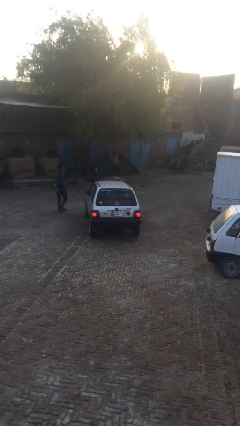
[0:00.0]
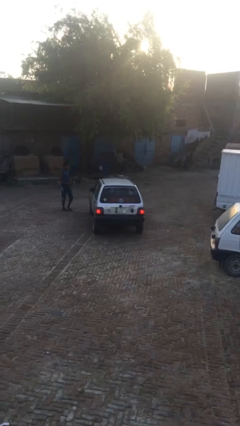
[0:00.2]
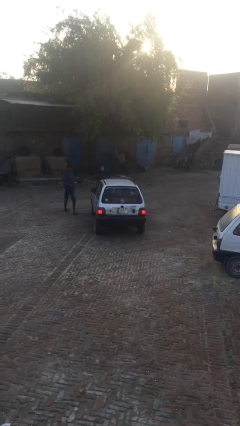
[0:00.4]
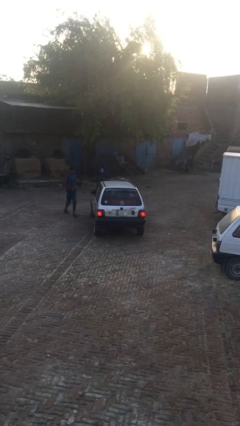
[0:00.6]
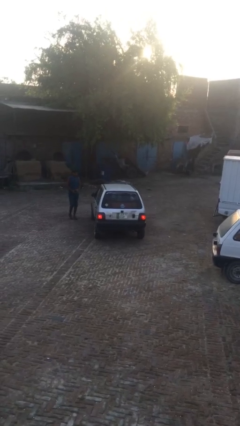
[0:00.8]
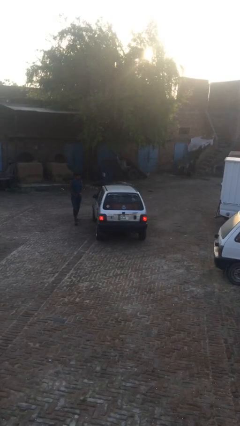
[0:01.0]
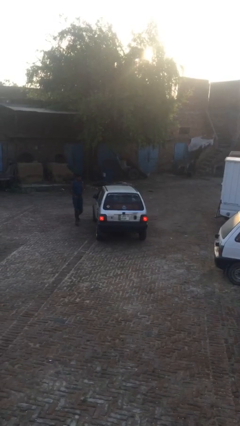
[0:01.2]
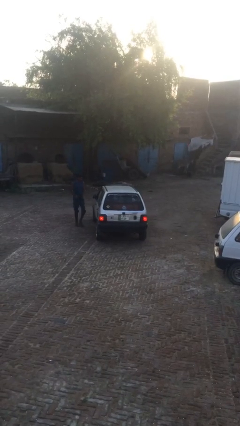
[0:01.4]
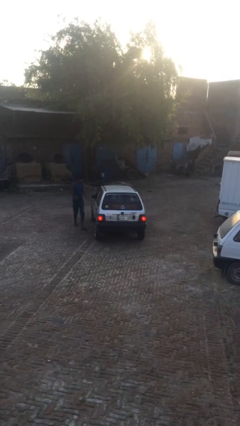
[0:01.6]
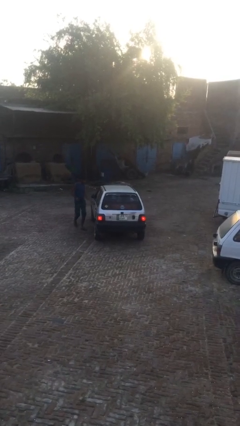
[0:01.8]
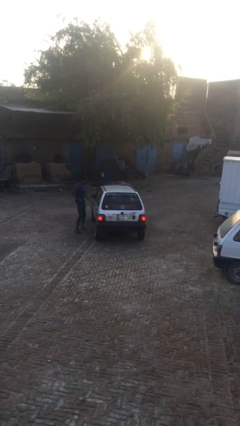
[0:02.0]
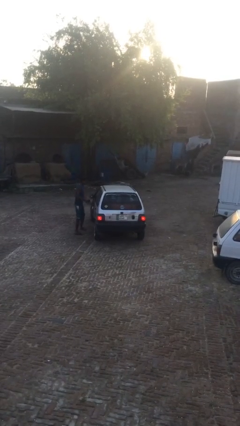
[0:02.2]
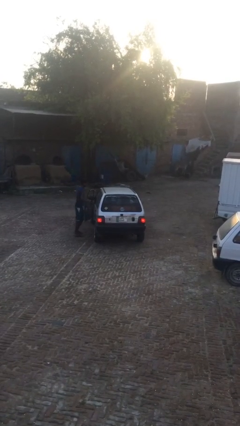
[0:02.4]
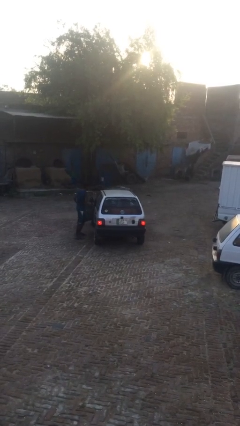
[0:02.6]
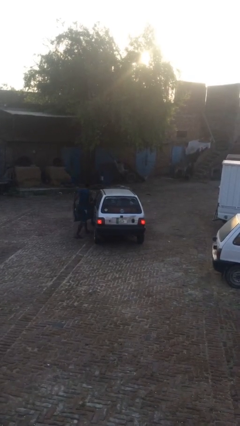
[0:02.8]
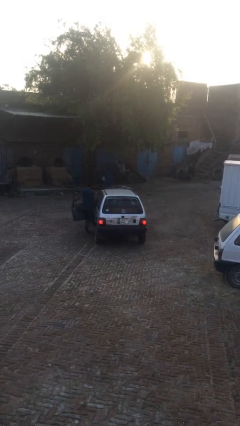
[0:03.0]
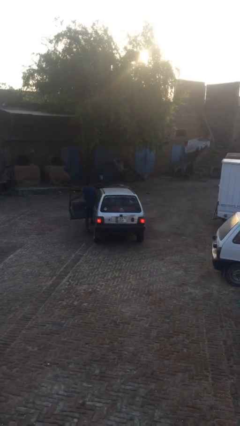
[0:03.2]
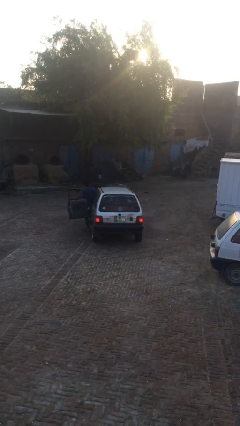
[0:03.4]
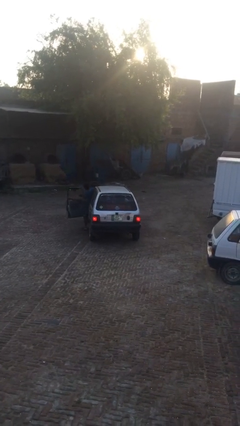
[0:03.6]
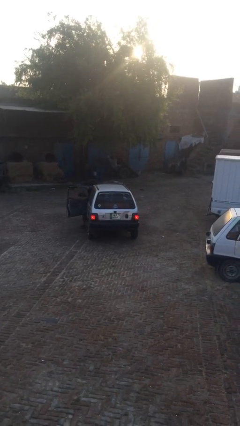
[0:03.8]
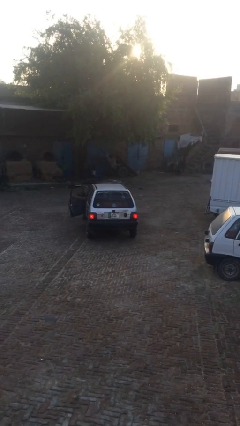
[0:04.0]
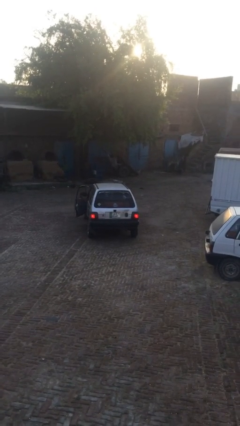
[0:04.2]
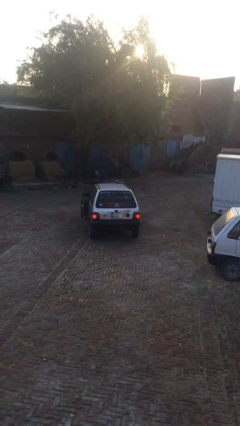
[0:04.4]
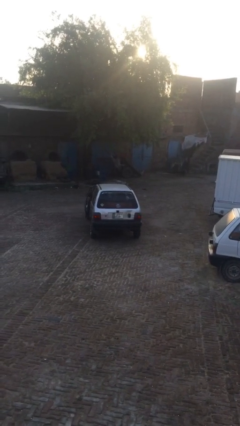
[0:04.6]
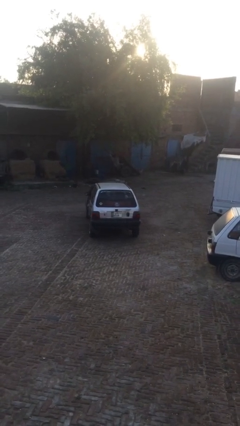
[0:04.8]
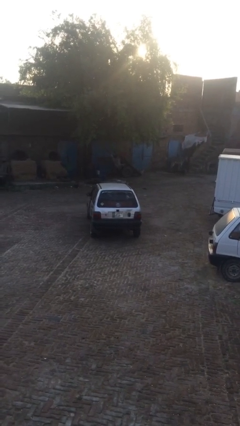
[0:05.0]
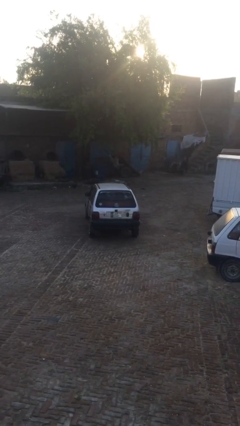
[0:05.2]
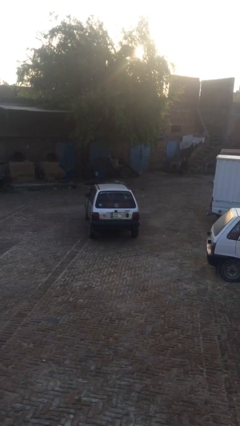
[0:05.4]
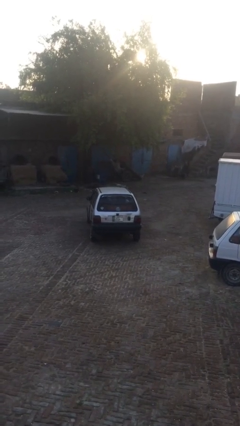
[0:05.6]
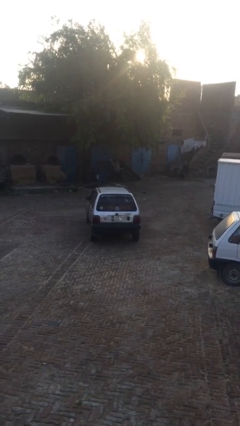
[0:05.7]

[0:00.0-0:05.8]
car picks up person

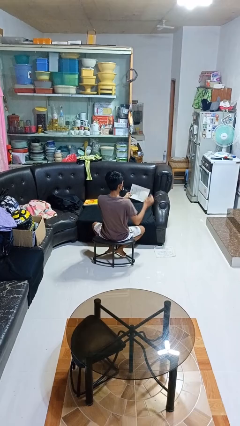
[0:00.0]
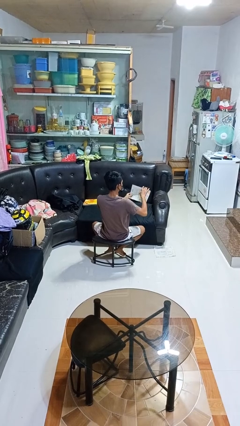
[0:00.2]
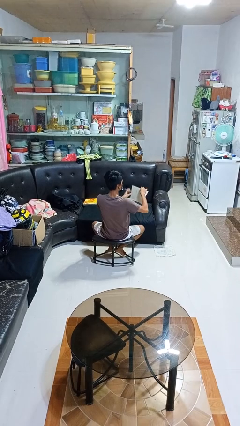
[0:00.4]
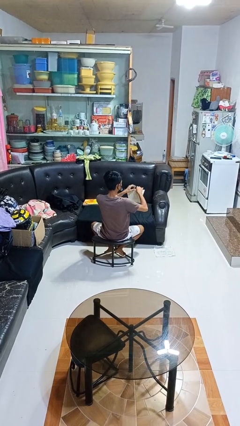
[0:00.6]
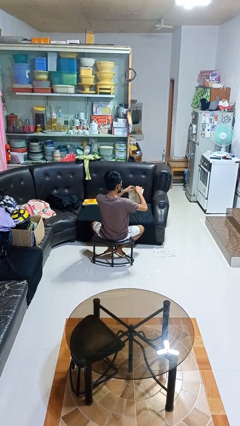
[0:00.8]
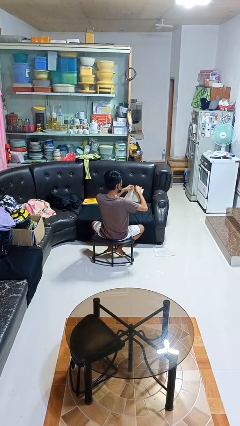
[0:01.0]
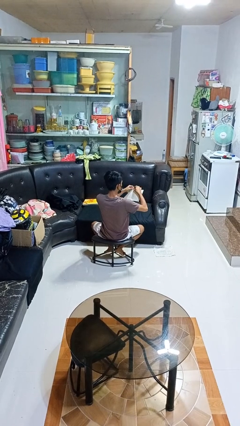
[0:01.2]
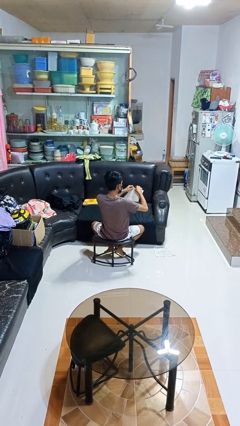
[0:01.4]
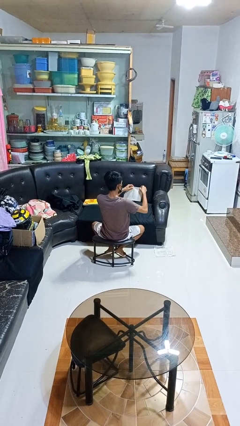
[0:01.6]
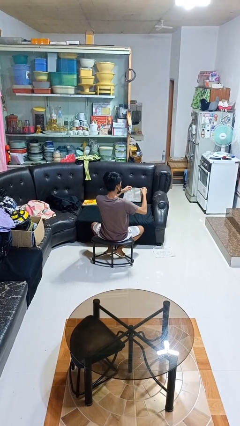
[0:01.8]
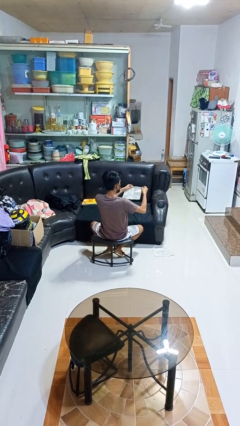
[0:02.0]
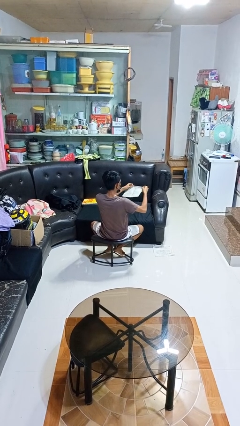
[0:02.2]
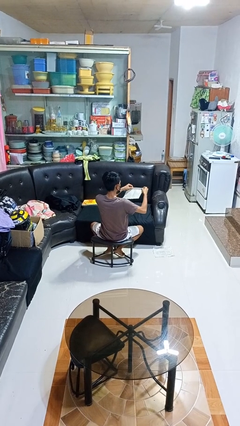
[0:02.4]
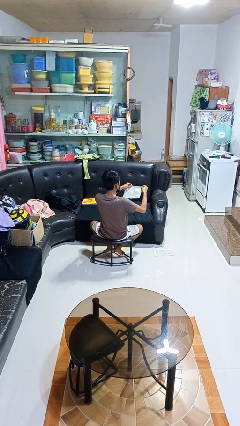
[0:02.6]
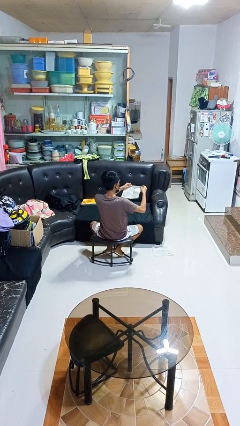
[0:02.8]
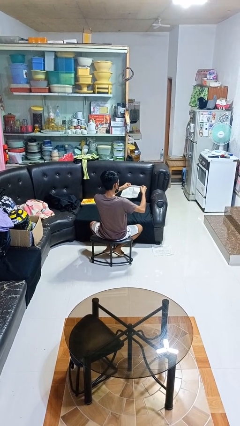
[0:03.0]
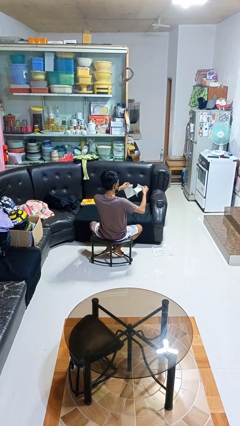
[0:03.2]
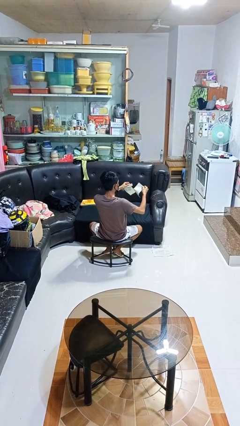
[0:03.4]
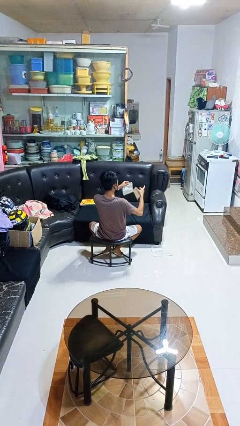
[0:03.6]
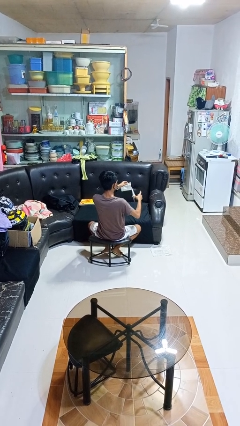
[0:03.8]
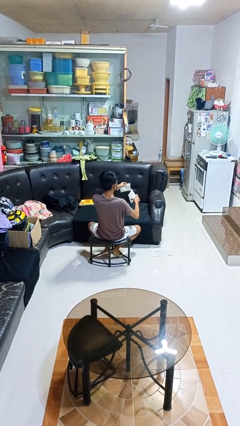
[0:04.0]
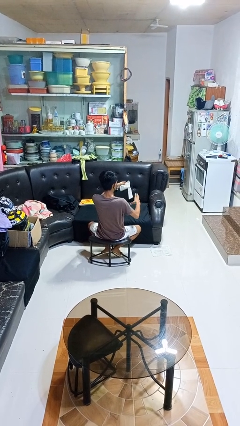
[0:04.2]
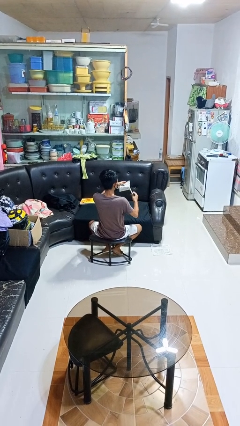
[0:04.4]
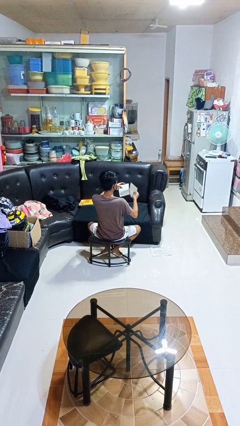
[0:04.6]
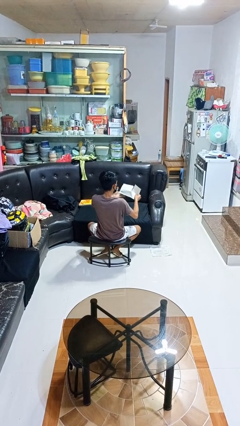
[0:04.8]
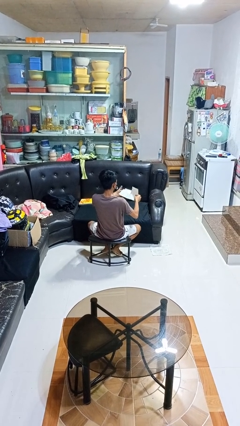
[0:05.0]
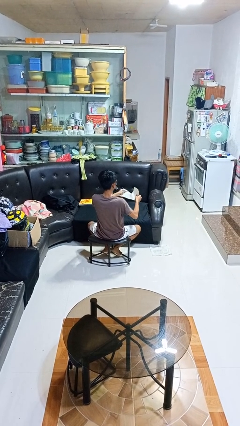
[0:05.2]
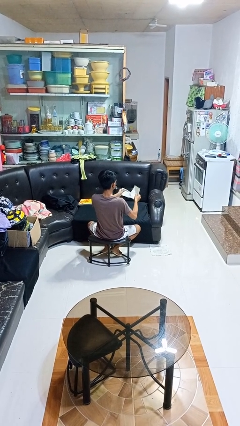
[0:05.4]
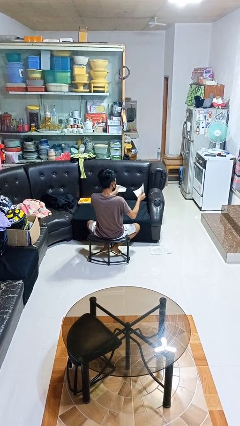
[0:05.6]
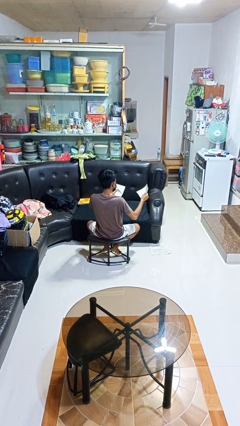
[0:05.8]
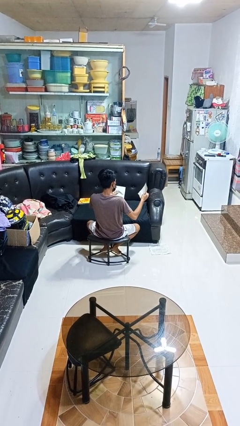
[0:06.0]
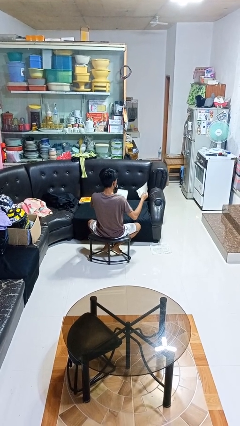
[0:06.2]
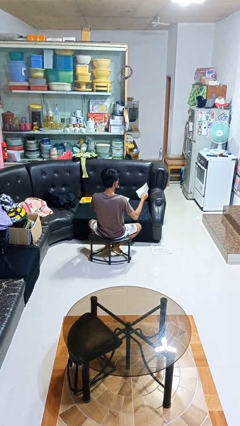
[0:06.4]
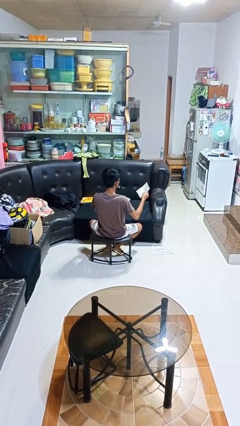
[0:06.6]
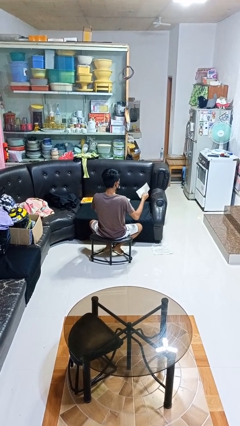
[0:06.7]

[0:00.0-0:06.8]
person tears paper

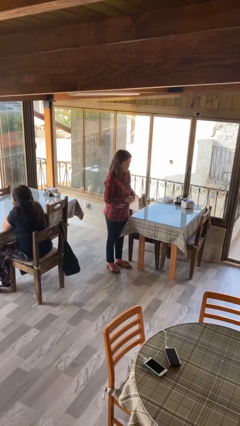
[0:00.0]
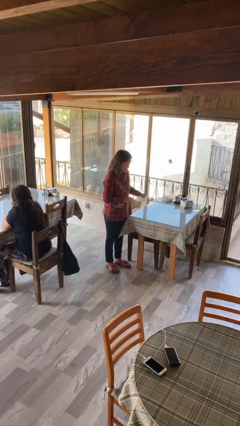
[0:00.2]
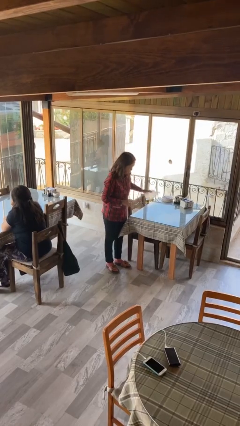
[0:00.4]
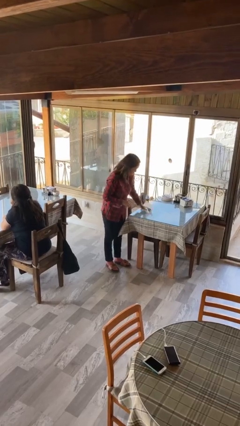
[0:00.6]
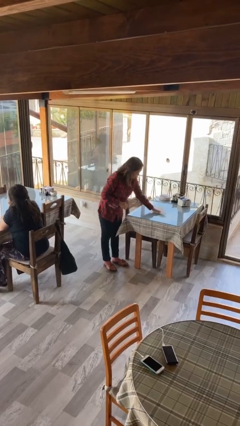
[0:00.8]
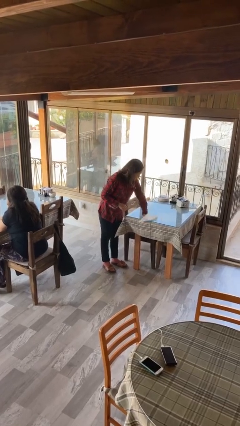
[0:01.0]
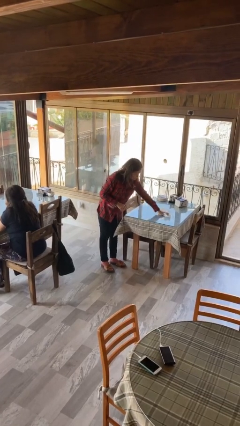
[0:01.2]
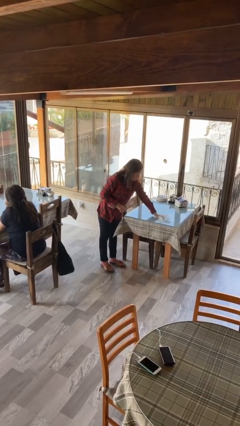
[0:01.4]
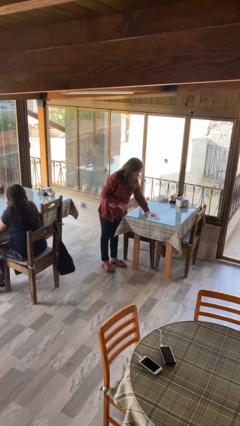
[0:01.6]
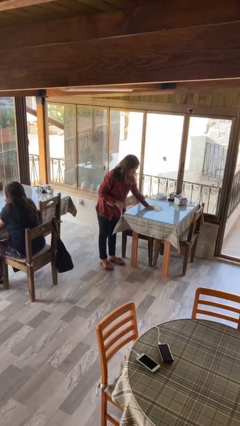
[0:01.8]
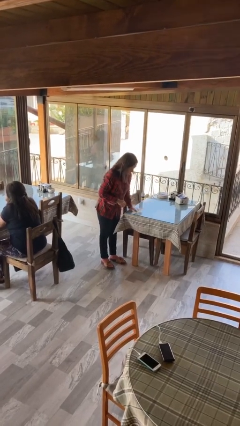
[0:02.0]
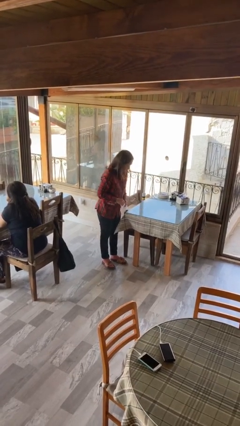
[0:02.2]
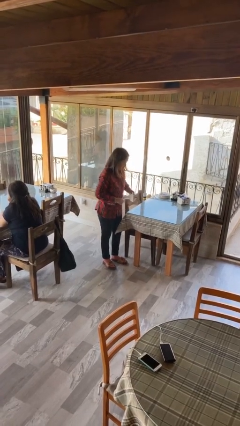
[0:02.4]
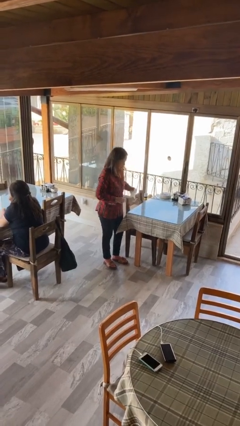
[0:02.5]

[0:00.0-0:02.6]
person cleans table with rag

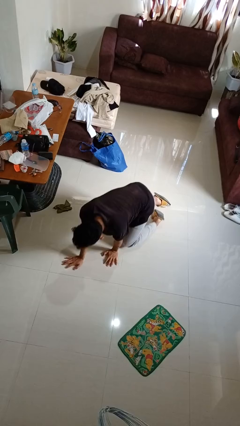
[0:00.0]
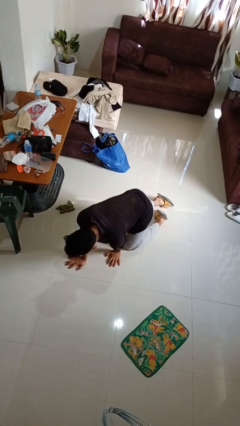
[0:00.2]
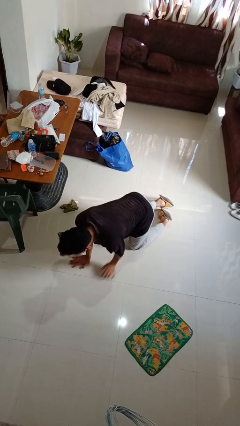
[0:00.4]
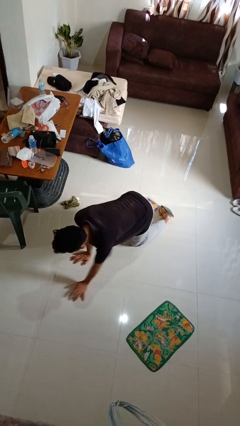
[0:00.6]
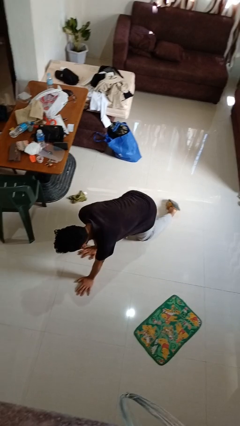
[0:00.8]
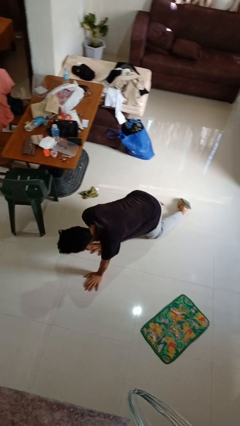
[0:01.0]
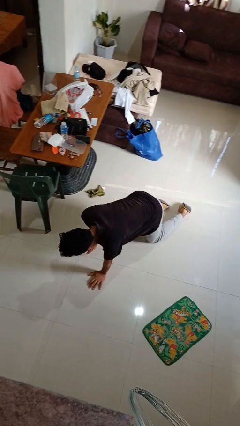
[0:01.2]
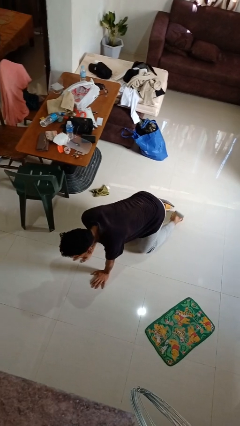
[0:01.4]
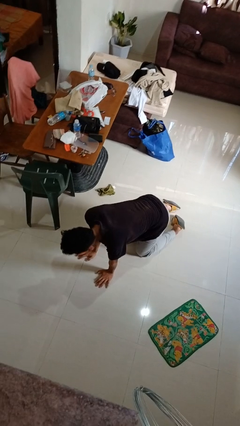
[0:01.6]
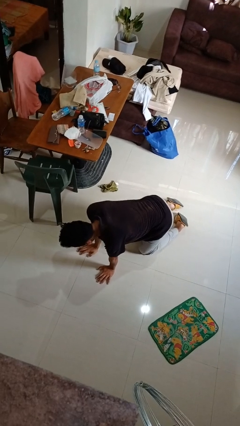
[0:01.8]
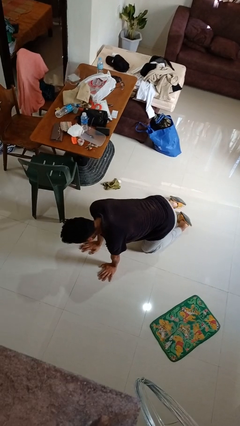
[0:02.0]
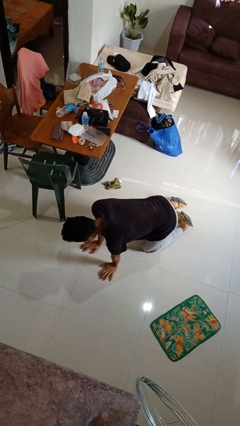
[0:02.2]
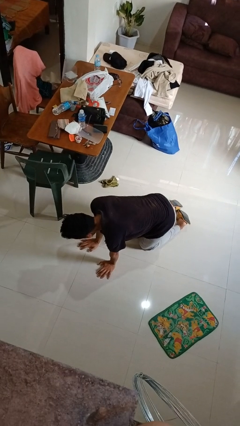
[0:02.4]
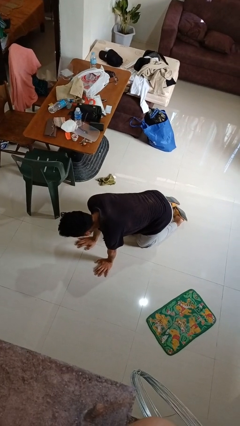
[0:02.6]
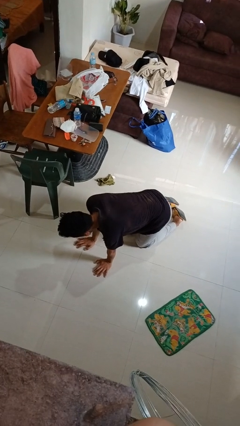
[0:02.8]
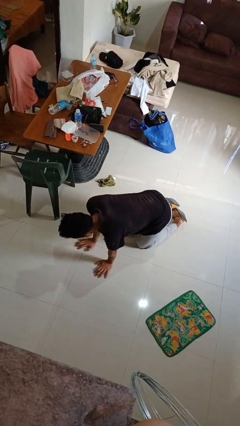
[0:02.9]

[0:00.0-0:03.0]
person crawls
